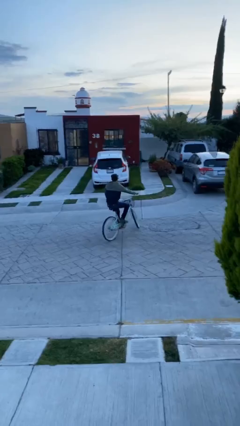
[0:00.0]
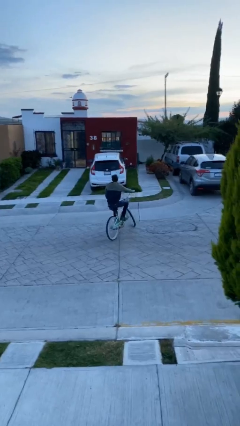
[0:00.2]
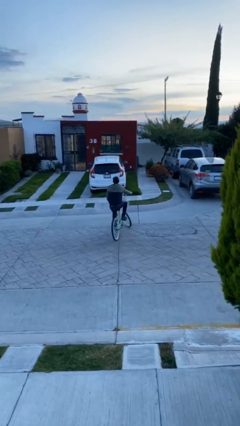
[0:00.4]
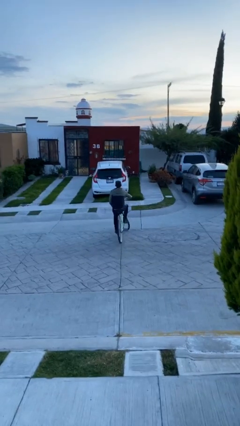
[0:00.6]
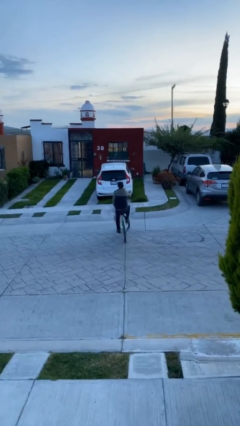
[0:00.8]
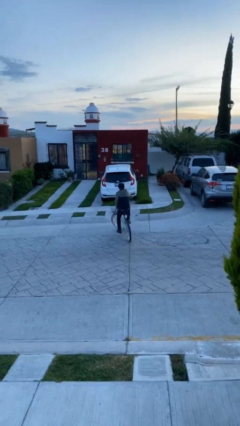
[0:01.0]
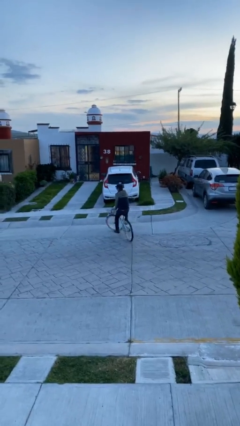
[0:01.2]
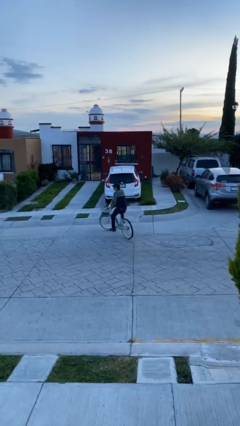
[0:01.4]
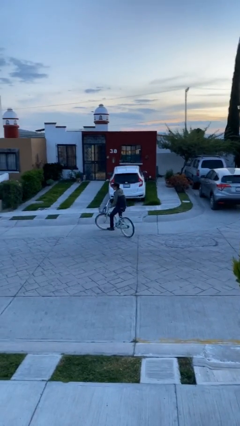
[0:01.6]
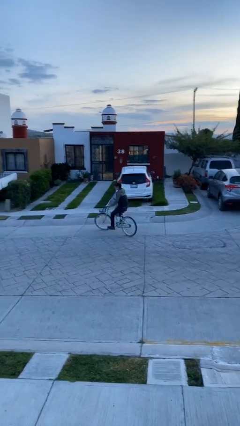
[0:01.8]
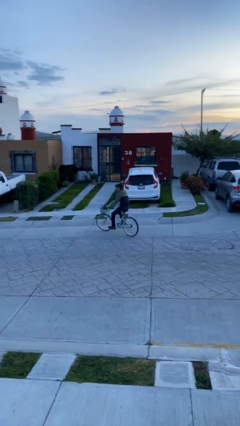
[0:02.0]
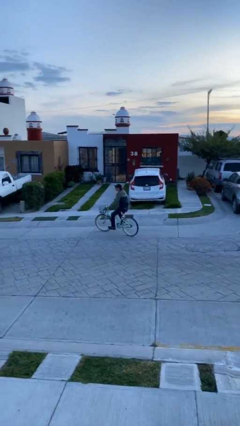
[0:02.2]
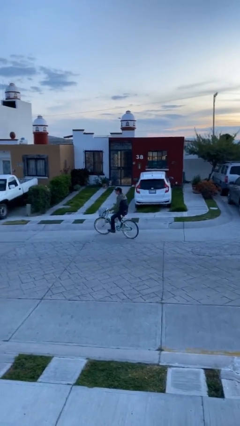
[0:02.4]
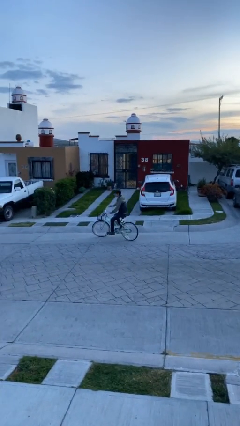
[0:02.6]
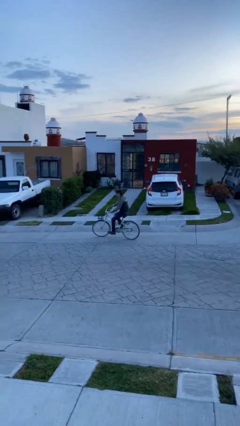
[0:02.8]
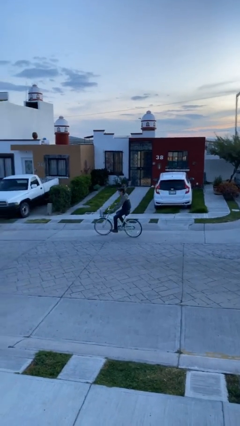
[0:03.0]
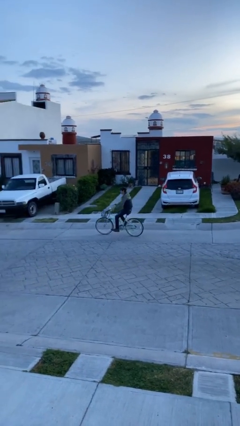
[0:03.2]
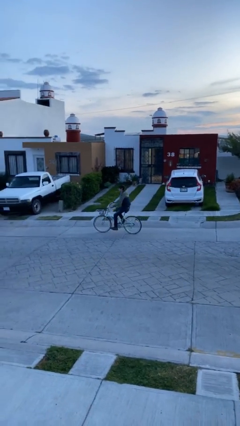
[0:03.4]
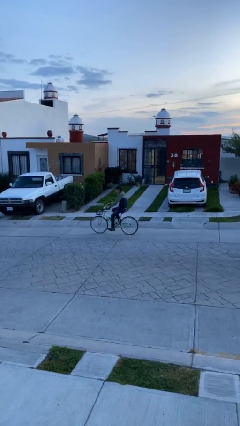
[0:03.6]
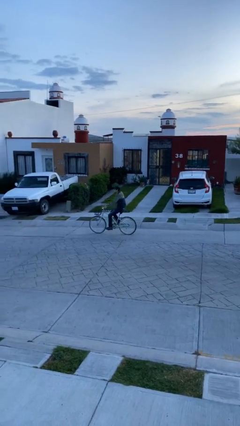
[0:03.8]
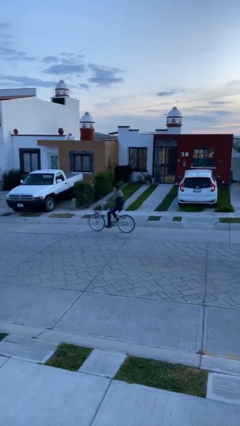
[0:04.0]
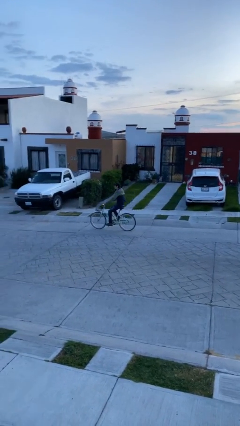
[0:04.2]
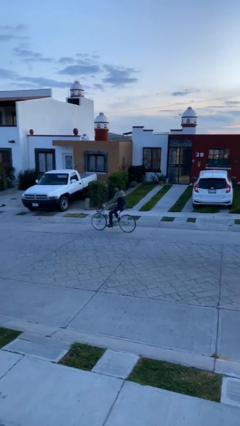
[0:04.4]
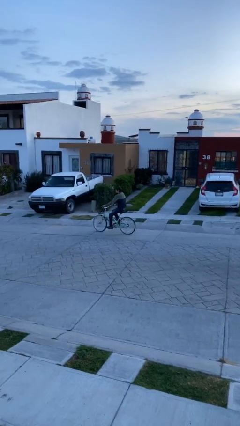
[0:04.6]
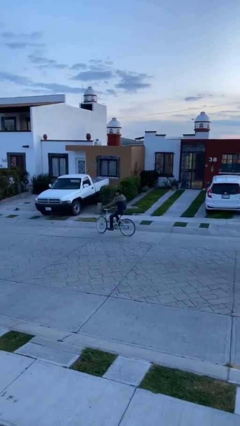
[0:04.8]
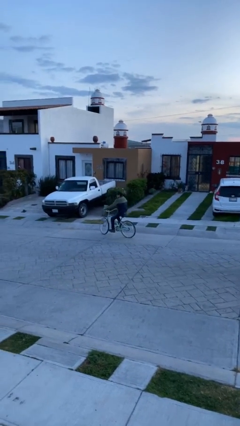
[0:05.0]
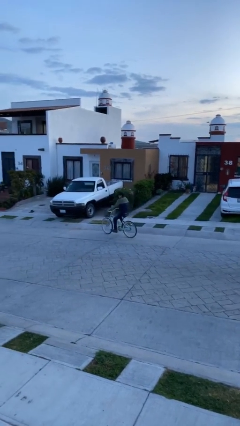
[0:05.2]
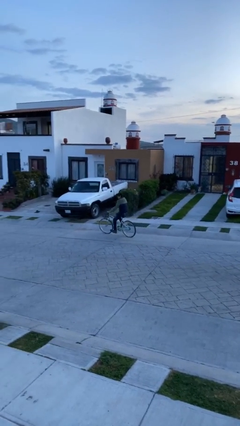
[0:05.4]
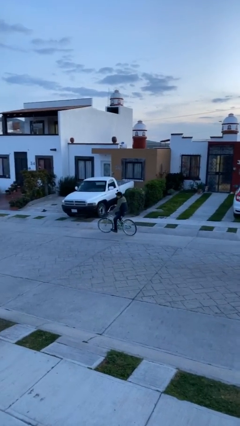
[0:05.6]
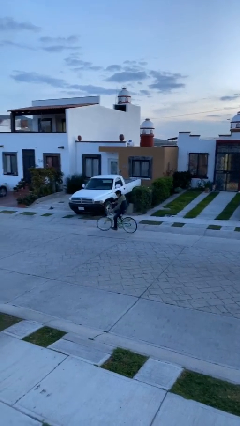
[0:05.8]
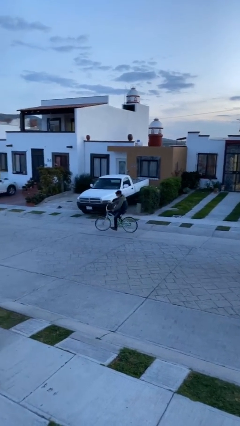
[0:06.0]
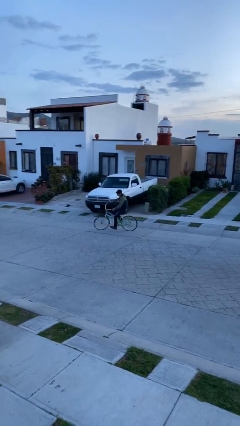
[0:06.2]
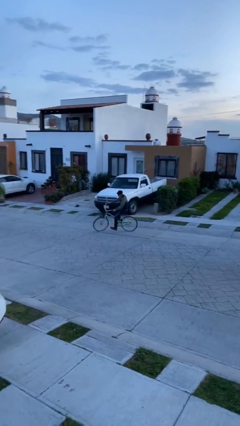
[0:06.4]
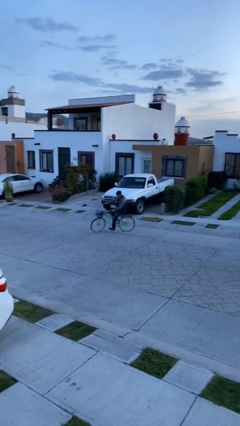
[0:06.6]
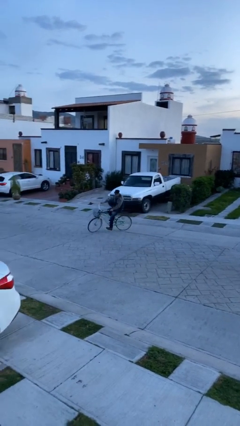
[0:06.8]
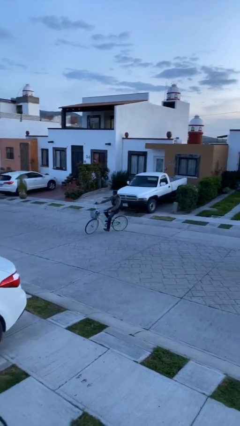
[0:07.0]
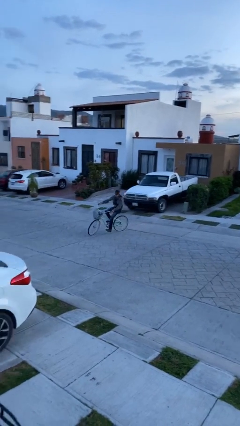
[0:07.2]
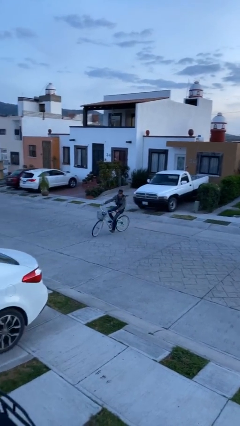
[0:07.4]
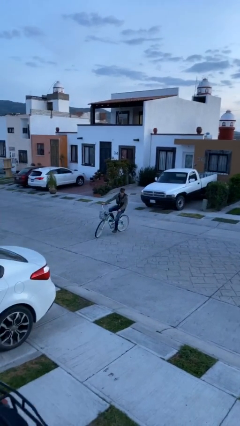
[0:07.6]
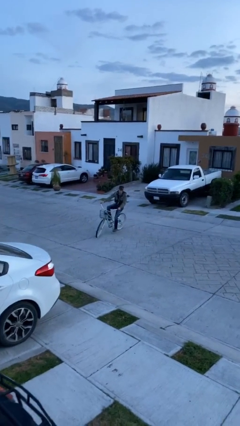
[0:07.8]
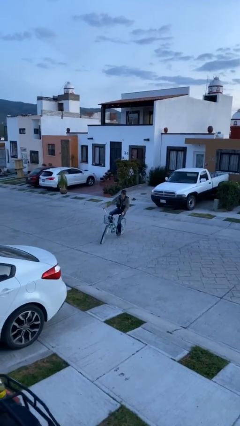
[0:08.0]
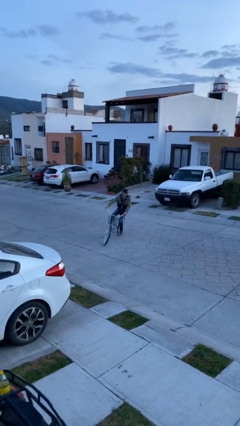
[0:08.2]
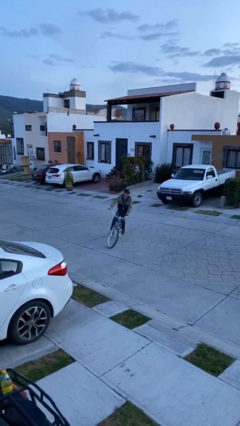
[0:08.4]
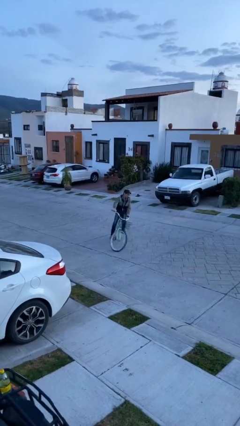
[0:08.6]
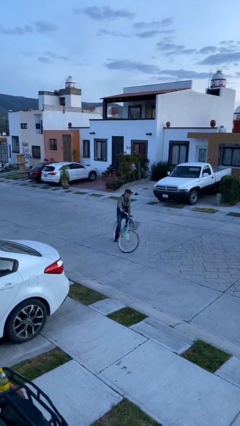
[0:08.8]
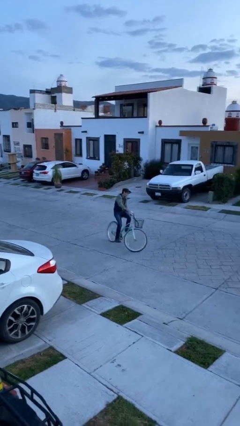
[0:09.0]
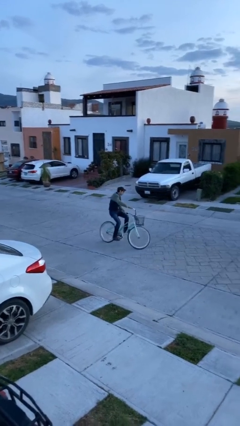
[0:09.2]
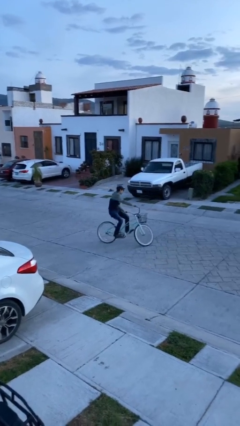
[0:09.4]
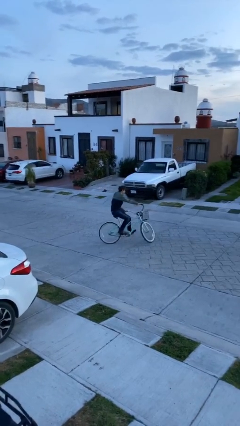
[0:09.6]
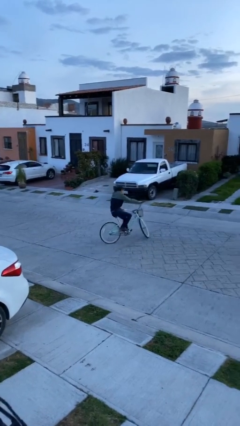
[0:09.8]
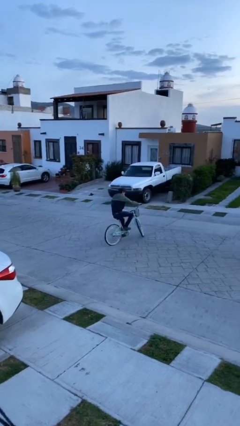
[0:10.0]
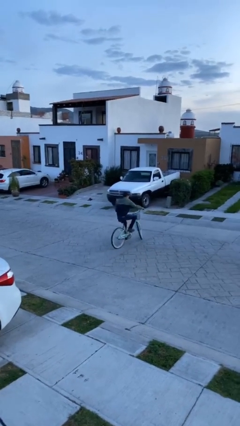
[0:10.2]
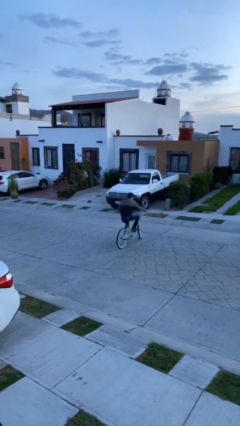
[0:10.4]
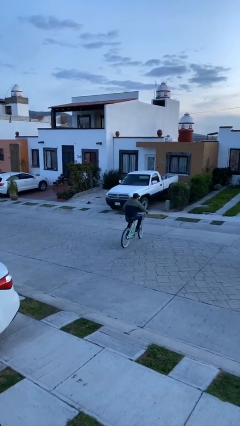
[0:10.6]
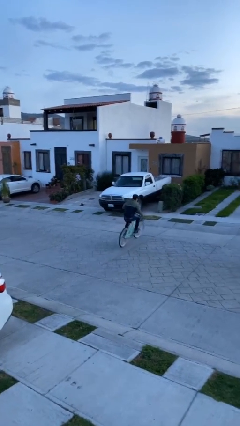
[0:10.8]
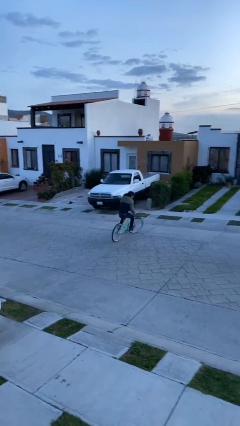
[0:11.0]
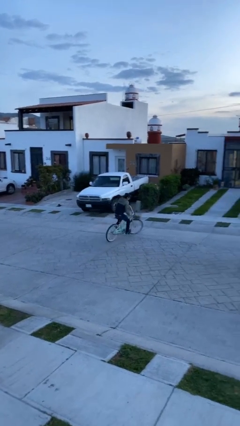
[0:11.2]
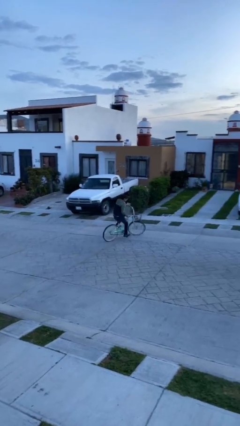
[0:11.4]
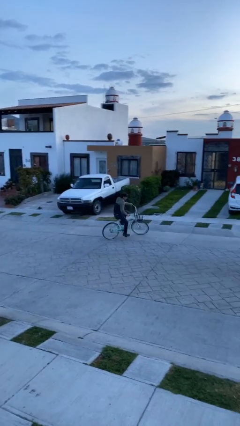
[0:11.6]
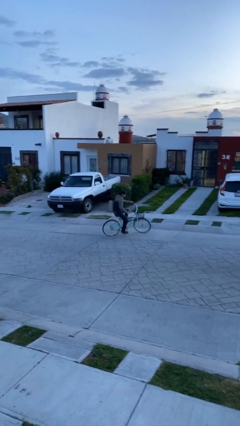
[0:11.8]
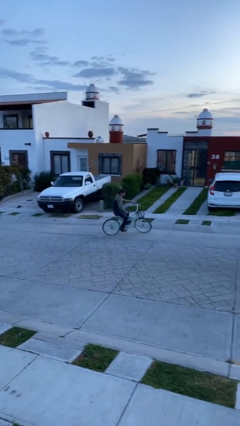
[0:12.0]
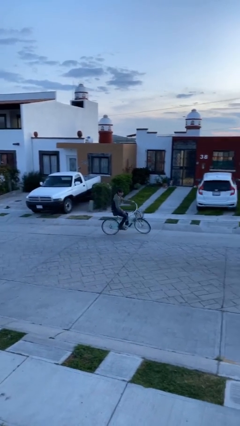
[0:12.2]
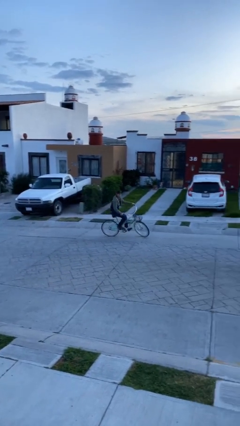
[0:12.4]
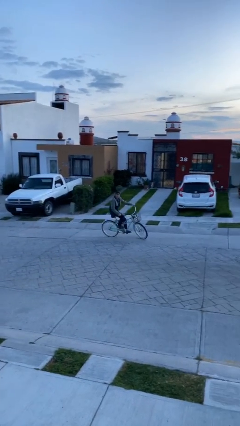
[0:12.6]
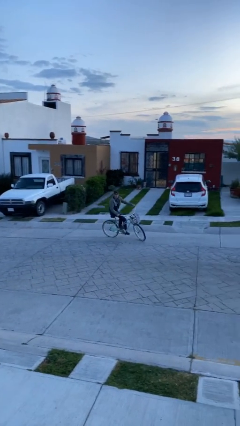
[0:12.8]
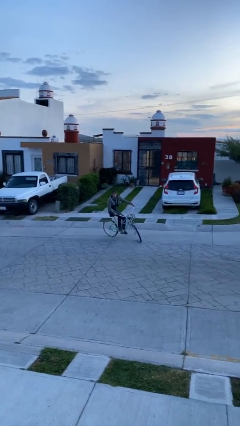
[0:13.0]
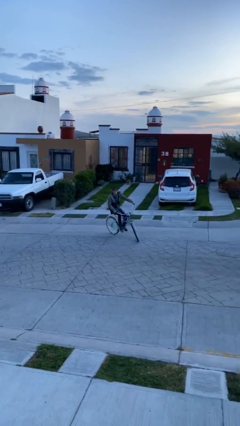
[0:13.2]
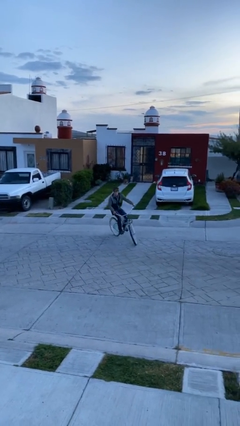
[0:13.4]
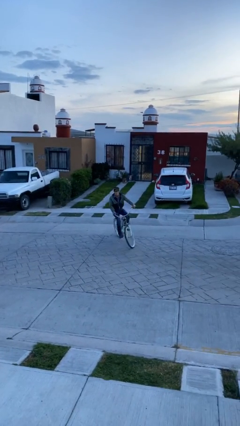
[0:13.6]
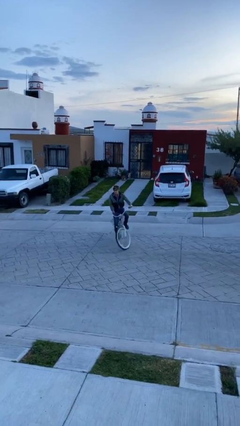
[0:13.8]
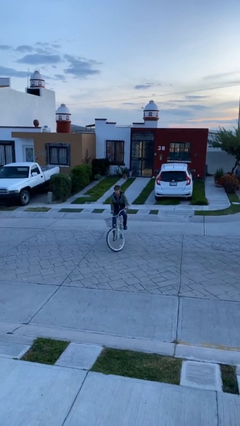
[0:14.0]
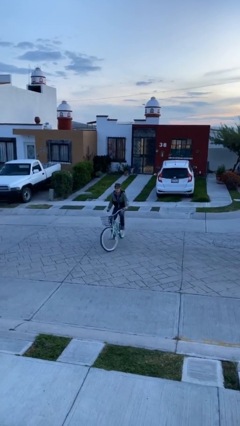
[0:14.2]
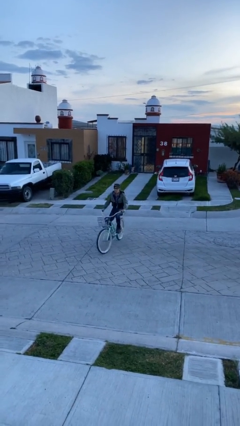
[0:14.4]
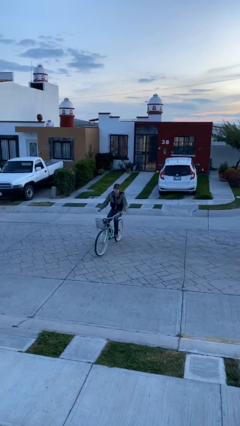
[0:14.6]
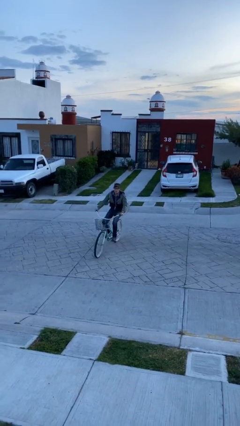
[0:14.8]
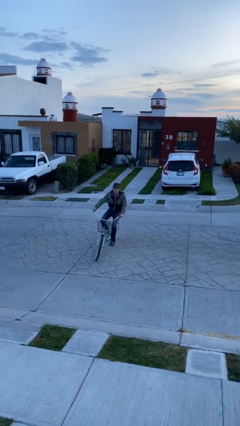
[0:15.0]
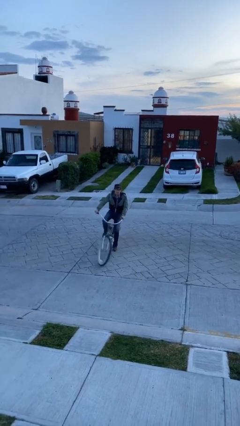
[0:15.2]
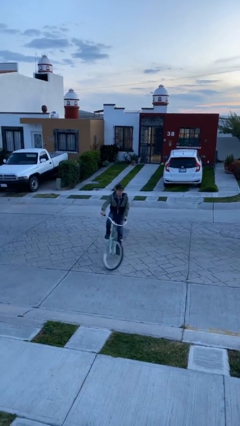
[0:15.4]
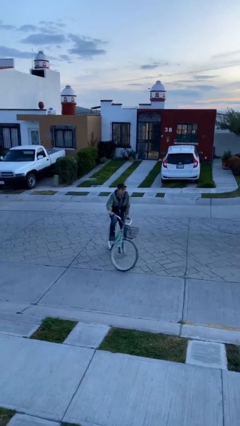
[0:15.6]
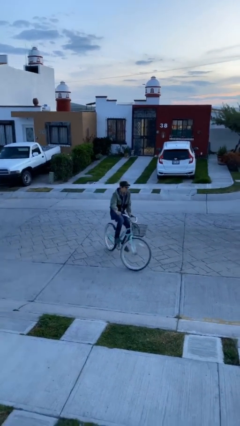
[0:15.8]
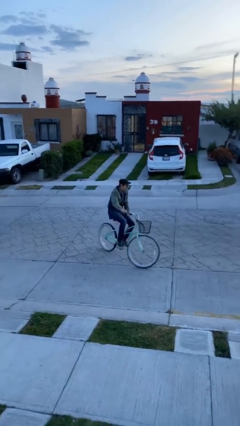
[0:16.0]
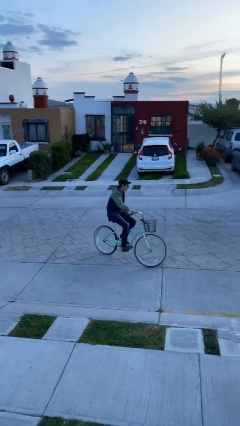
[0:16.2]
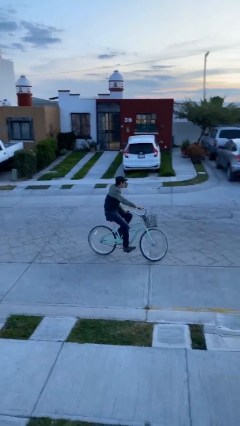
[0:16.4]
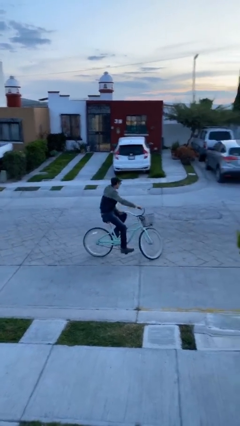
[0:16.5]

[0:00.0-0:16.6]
person rides bicycle

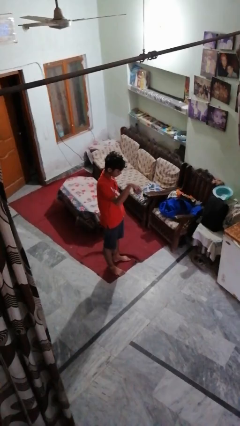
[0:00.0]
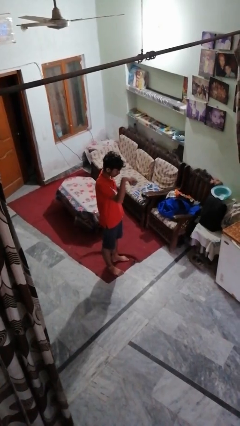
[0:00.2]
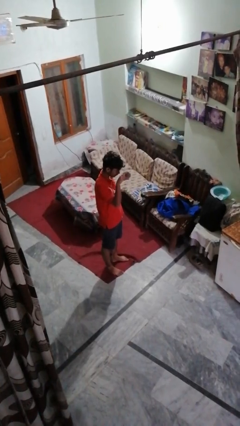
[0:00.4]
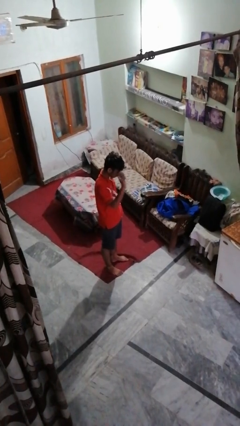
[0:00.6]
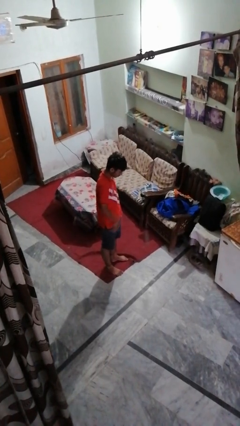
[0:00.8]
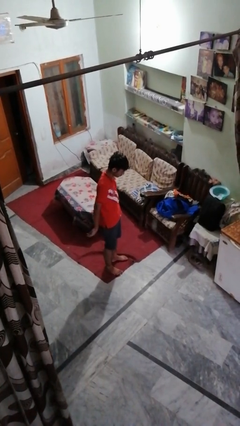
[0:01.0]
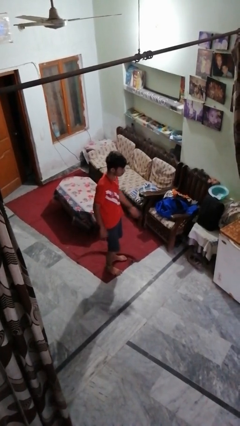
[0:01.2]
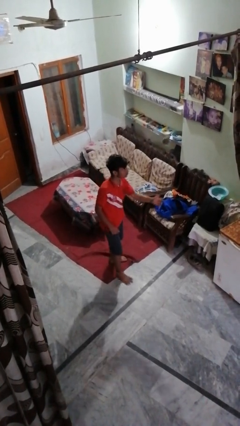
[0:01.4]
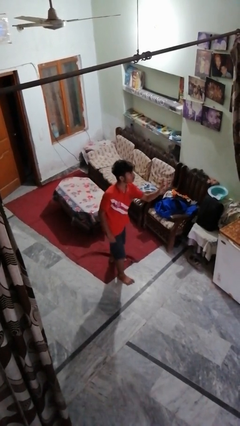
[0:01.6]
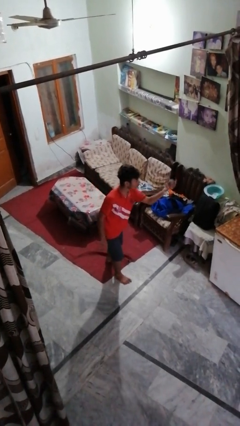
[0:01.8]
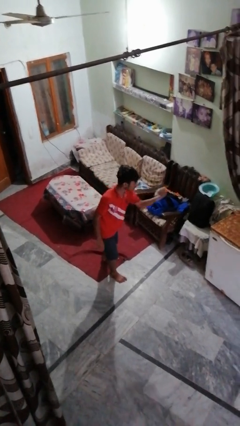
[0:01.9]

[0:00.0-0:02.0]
person bounces ball on floor
